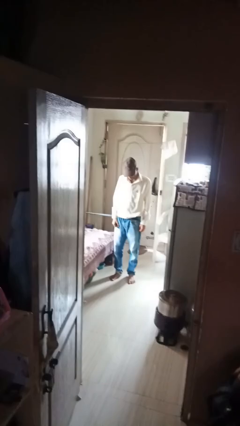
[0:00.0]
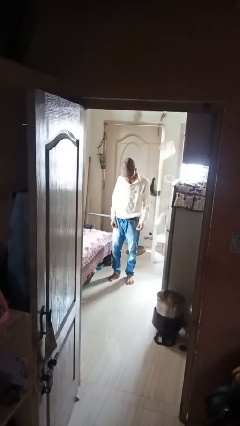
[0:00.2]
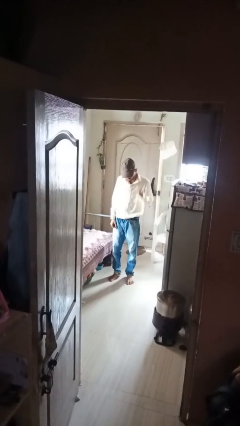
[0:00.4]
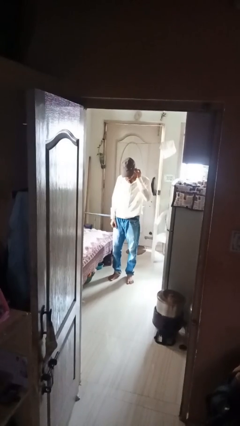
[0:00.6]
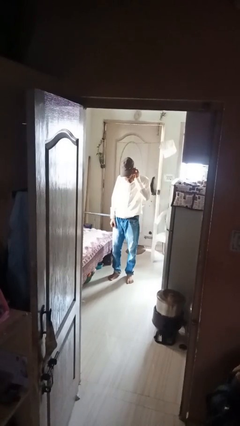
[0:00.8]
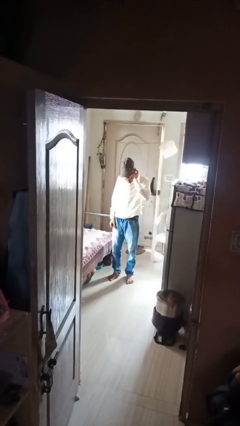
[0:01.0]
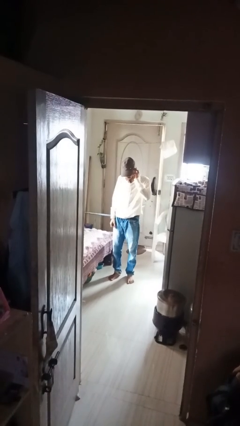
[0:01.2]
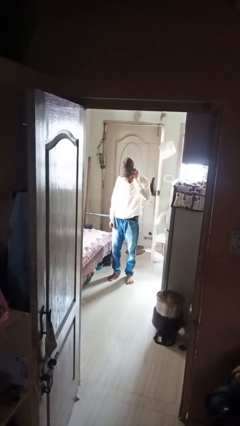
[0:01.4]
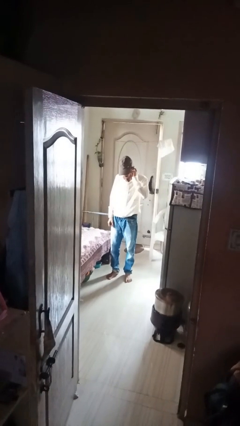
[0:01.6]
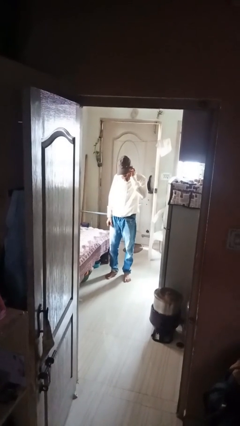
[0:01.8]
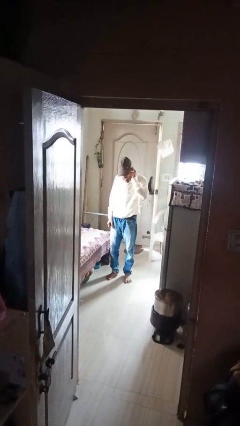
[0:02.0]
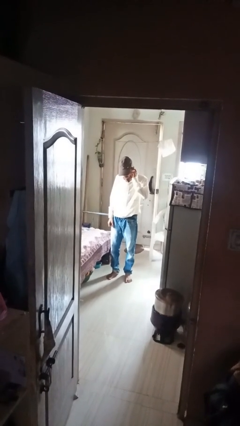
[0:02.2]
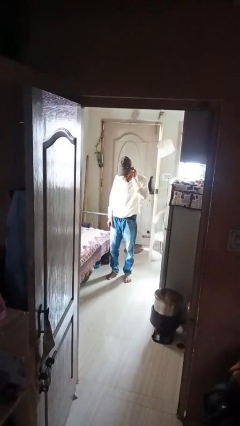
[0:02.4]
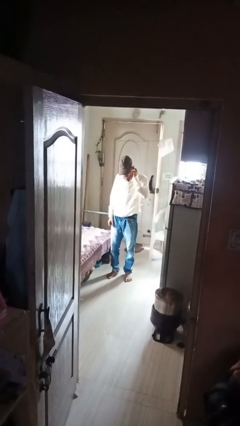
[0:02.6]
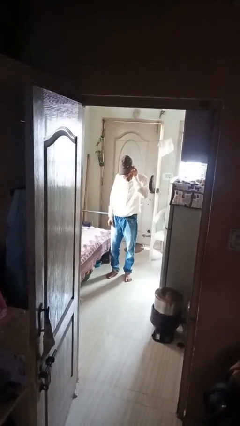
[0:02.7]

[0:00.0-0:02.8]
person touches earlobe

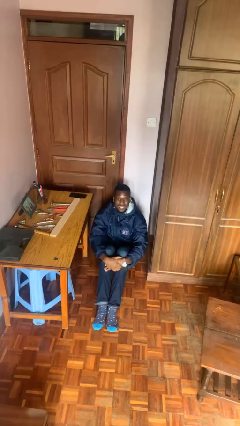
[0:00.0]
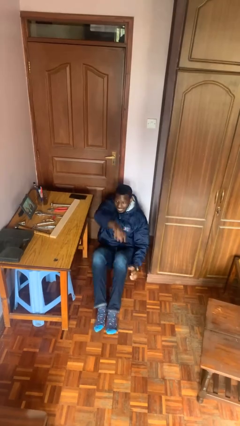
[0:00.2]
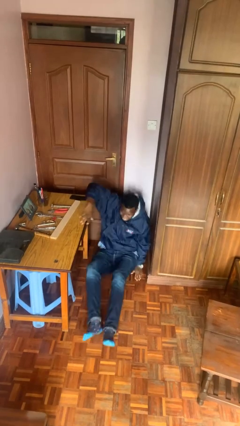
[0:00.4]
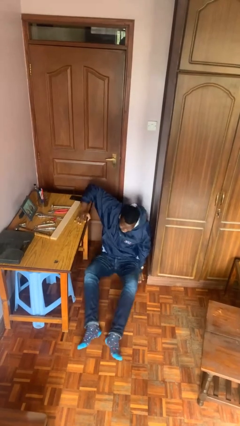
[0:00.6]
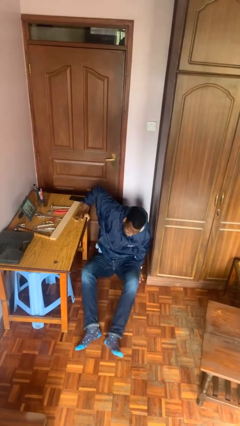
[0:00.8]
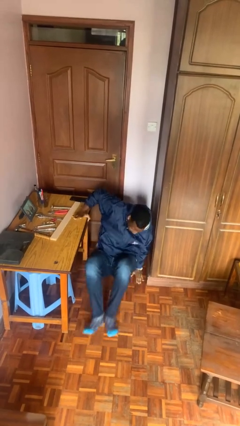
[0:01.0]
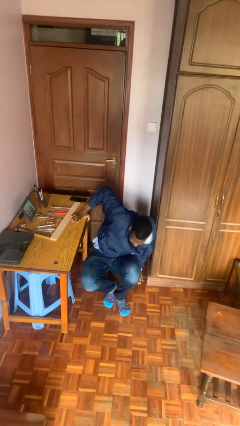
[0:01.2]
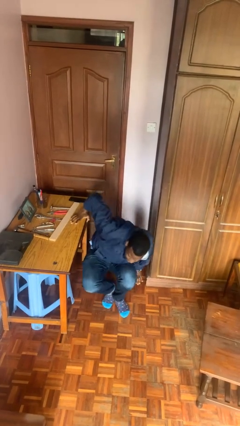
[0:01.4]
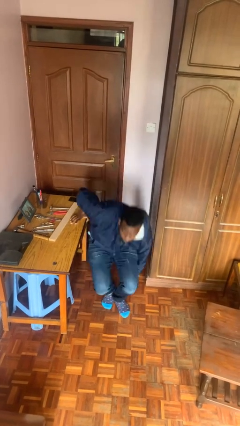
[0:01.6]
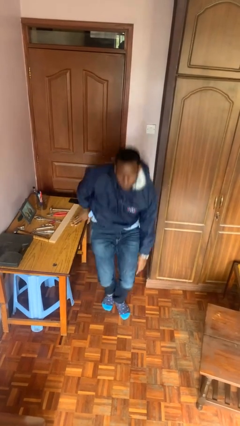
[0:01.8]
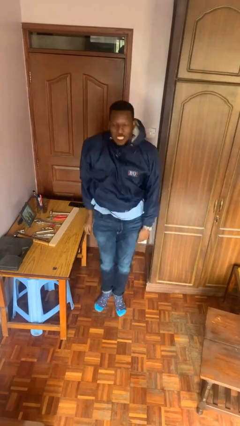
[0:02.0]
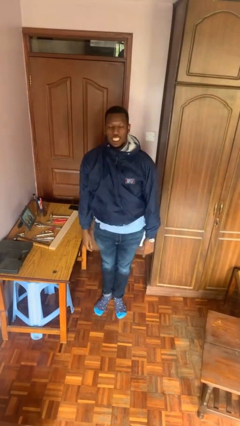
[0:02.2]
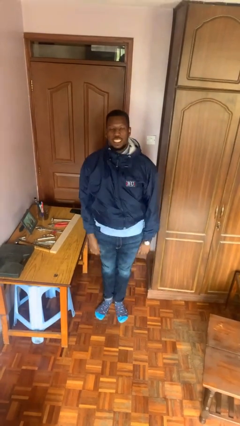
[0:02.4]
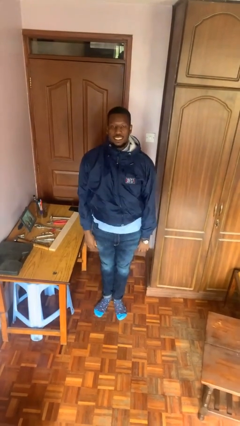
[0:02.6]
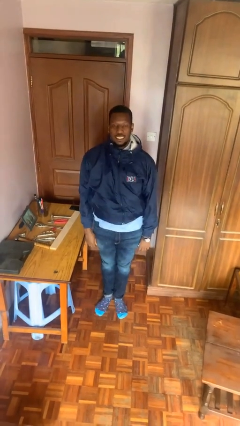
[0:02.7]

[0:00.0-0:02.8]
person stands up

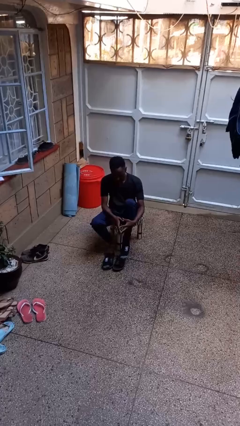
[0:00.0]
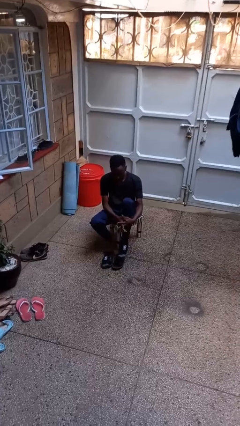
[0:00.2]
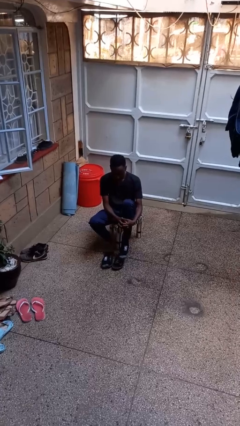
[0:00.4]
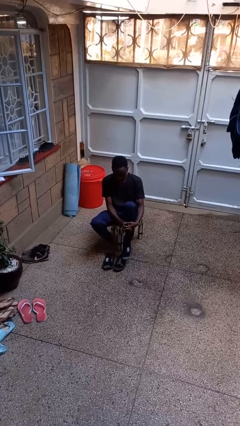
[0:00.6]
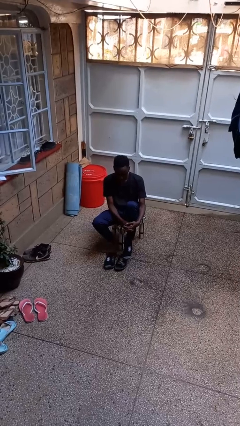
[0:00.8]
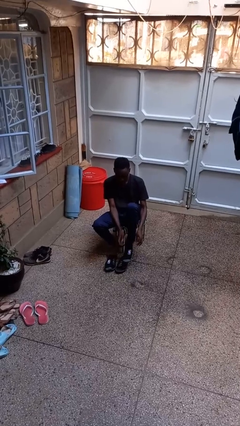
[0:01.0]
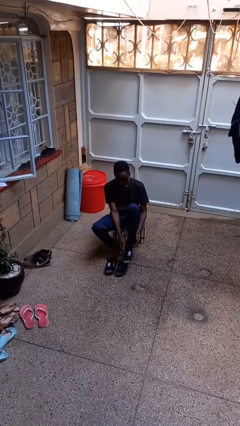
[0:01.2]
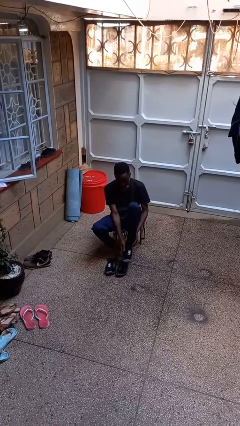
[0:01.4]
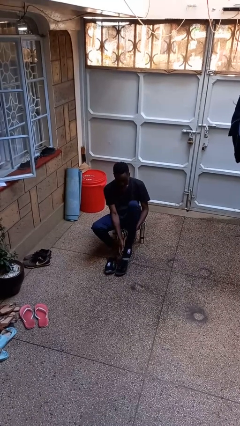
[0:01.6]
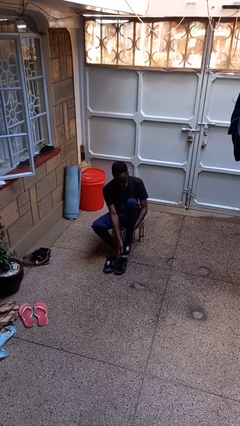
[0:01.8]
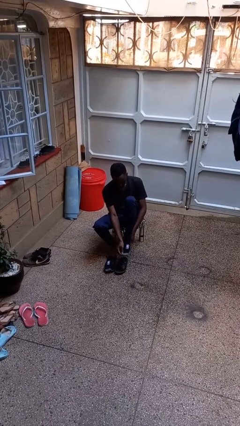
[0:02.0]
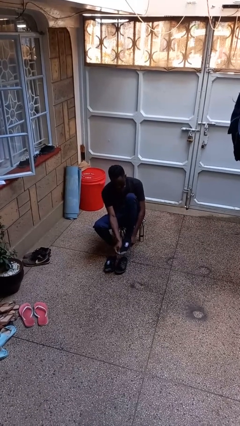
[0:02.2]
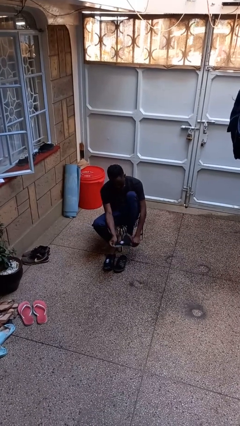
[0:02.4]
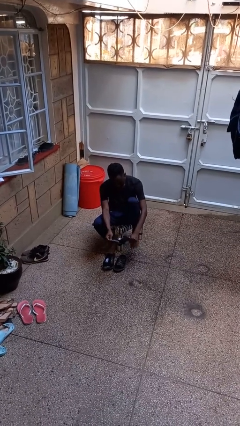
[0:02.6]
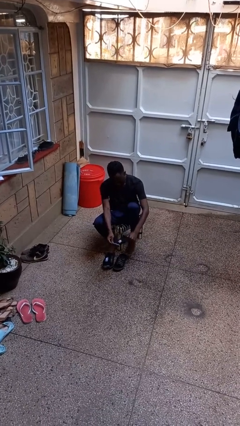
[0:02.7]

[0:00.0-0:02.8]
person takes off socks

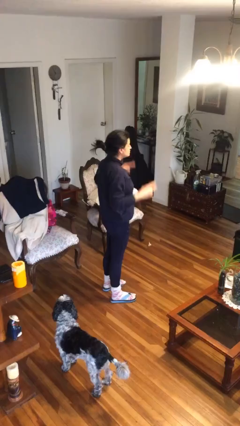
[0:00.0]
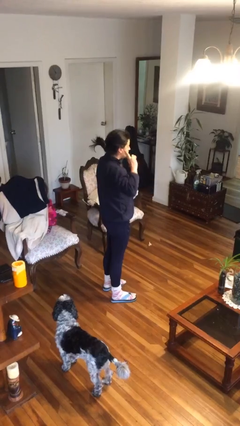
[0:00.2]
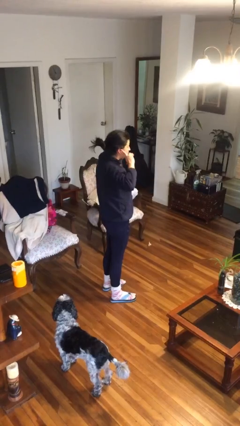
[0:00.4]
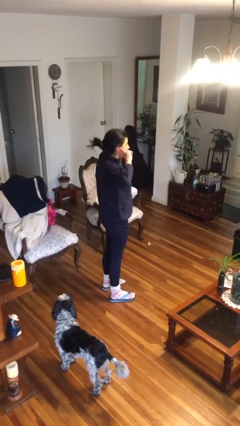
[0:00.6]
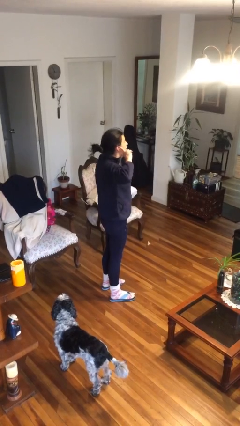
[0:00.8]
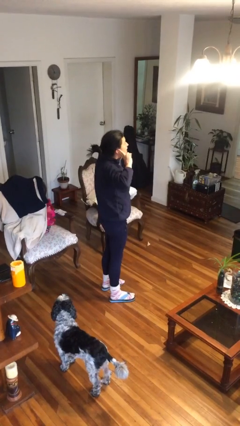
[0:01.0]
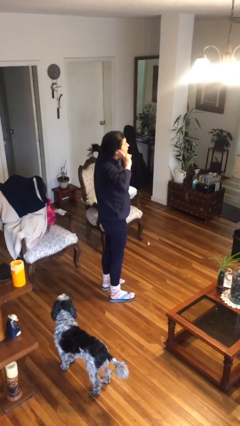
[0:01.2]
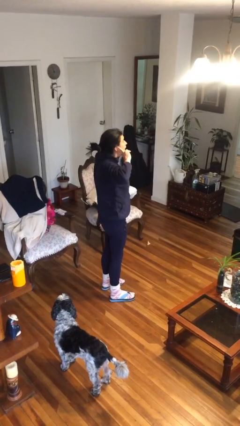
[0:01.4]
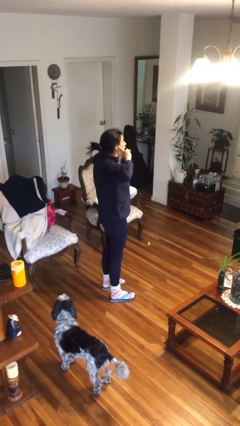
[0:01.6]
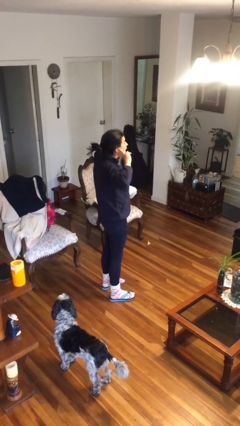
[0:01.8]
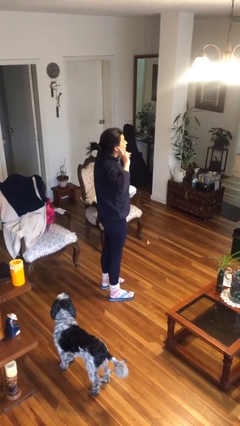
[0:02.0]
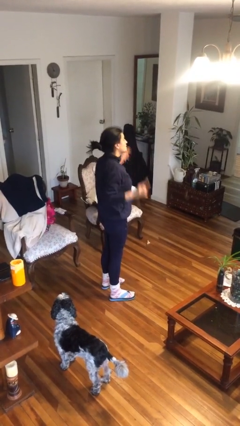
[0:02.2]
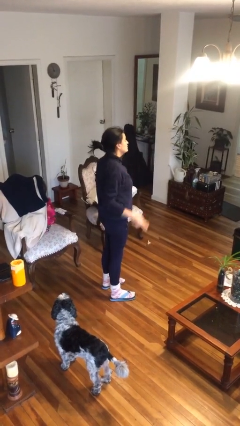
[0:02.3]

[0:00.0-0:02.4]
person puts fingers in ear

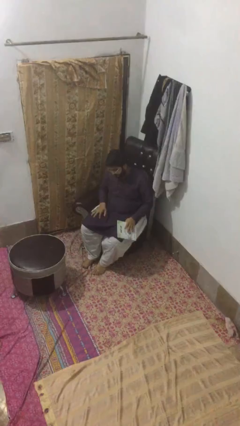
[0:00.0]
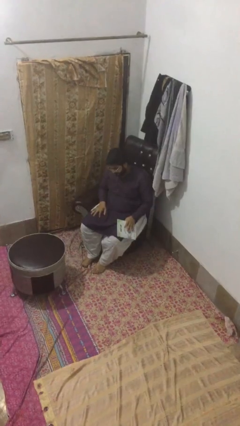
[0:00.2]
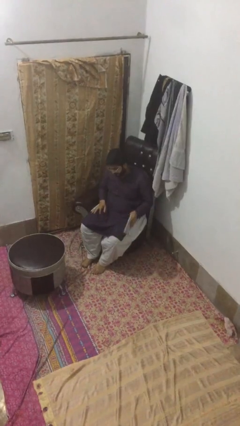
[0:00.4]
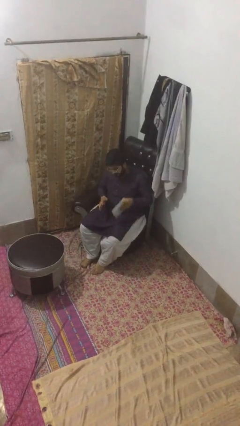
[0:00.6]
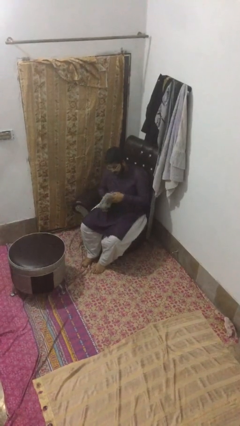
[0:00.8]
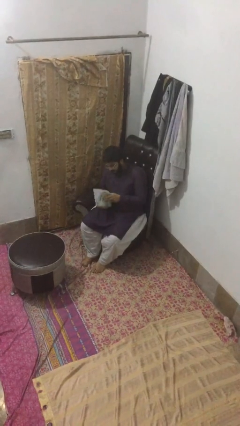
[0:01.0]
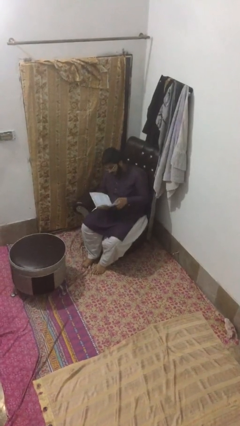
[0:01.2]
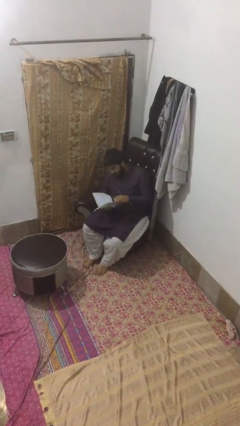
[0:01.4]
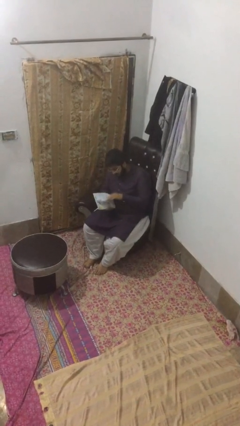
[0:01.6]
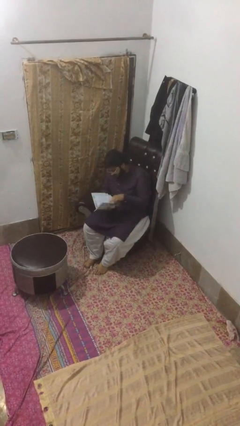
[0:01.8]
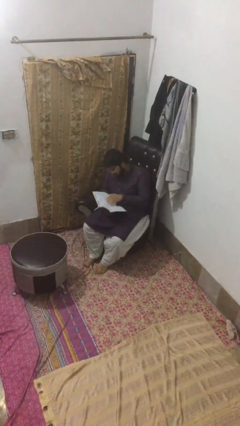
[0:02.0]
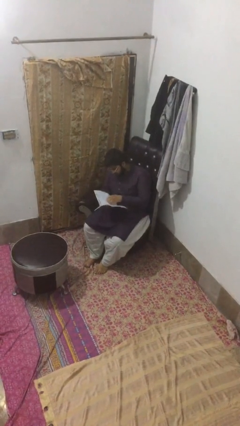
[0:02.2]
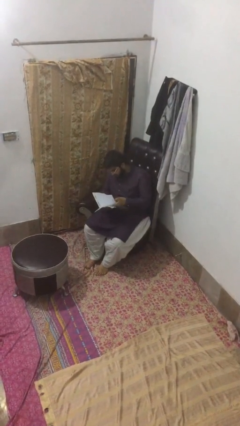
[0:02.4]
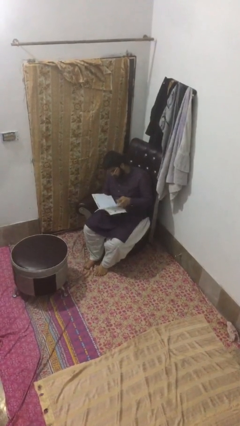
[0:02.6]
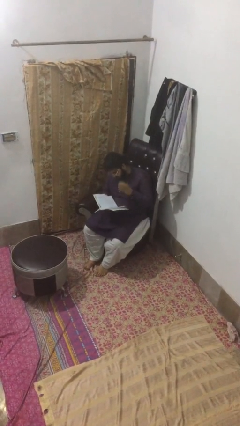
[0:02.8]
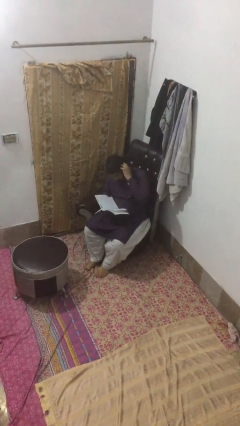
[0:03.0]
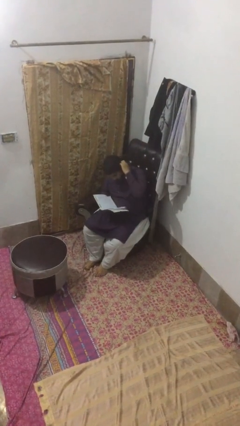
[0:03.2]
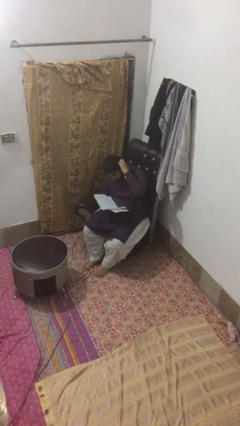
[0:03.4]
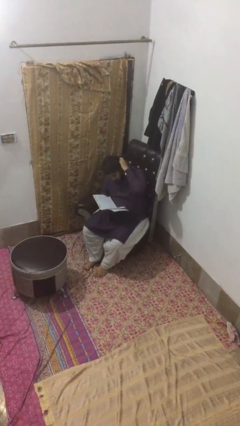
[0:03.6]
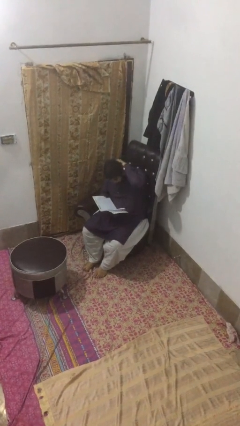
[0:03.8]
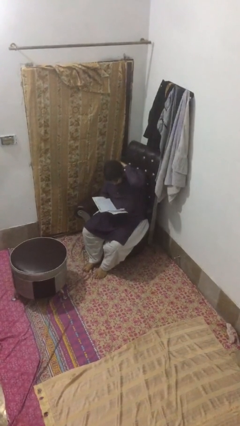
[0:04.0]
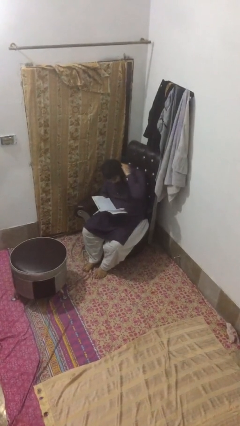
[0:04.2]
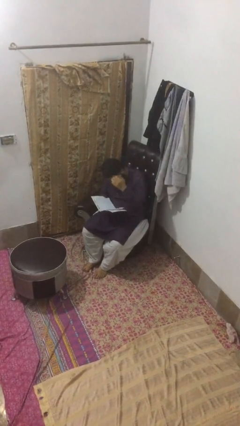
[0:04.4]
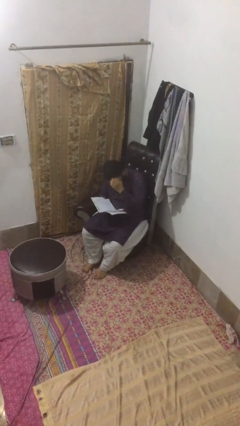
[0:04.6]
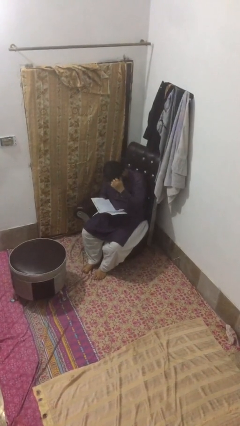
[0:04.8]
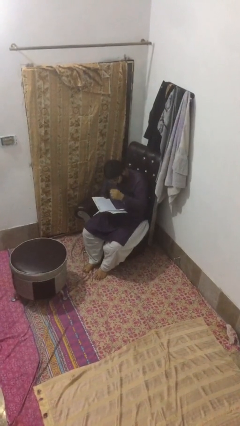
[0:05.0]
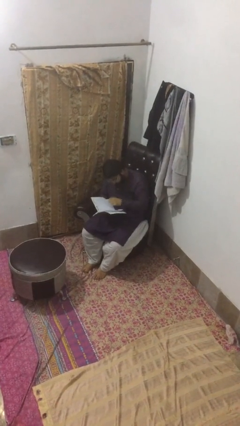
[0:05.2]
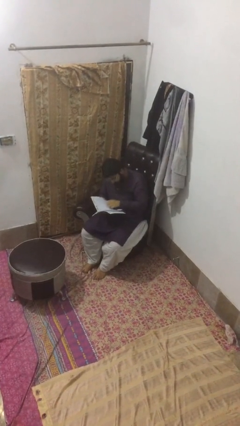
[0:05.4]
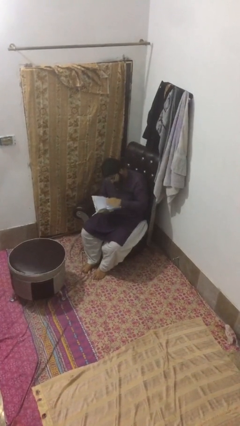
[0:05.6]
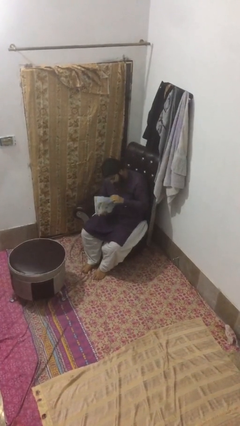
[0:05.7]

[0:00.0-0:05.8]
person reads document

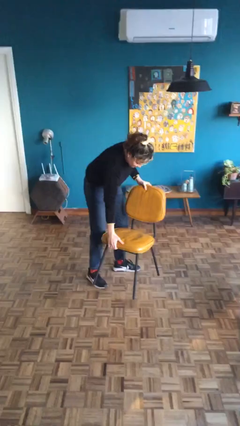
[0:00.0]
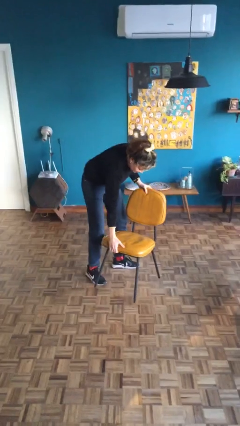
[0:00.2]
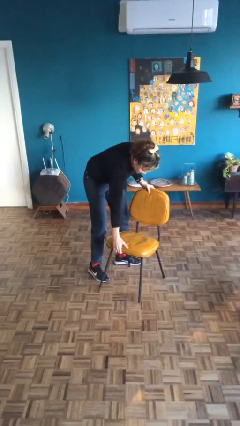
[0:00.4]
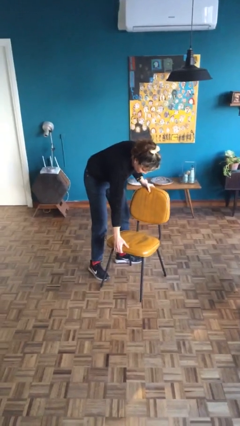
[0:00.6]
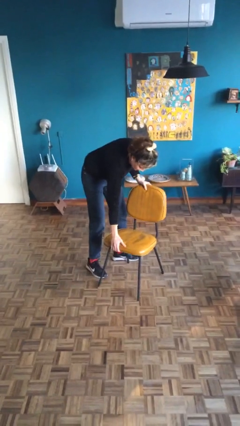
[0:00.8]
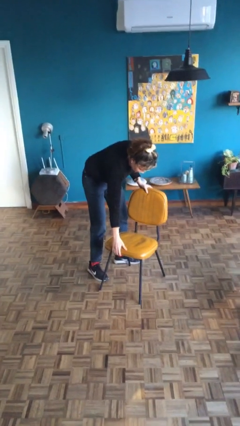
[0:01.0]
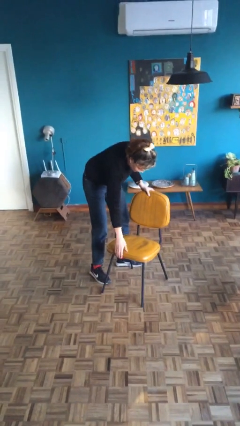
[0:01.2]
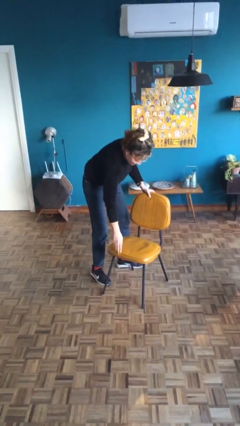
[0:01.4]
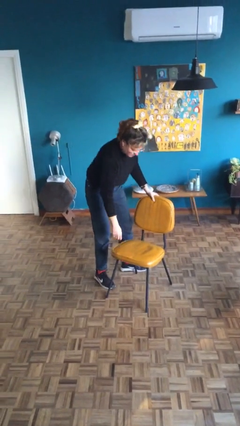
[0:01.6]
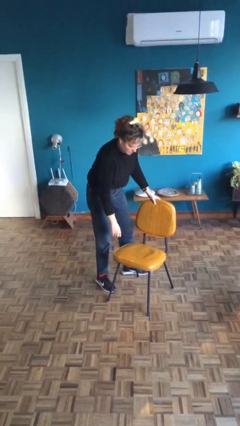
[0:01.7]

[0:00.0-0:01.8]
person puts down object on floor
